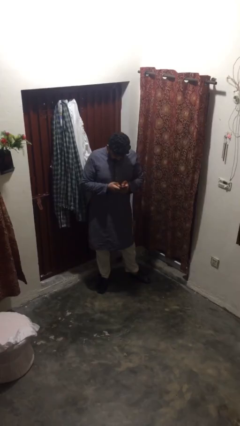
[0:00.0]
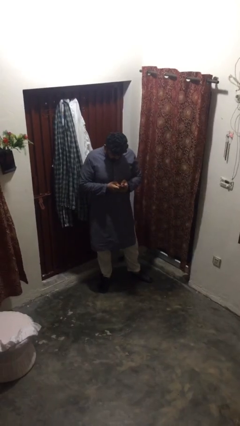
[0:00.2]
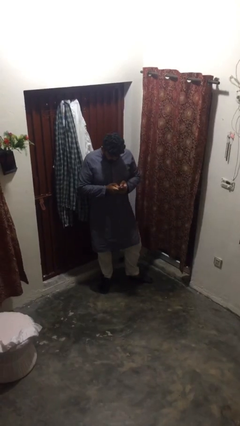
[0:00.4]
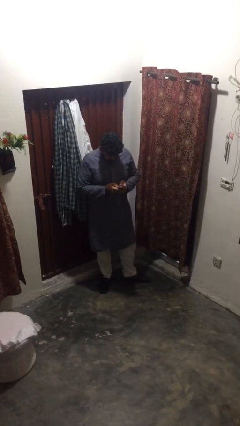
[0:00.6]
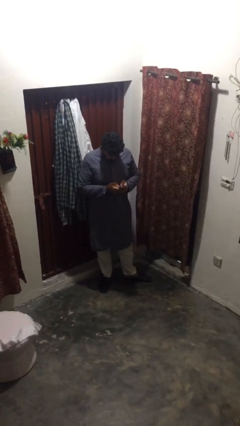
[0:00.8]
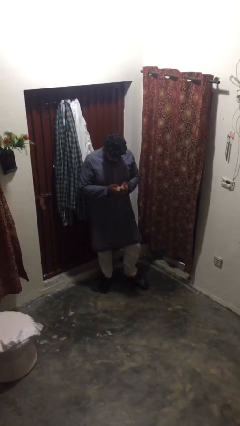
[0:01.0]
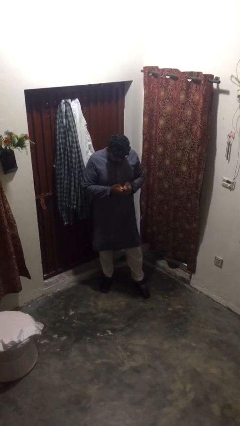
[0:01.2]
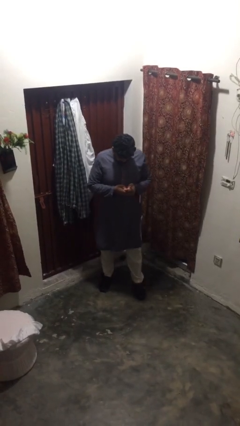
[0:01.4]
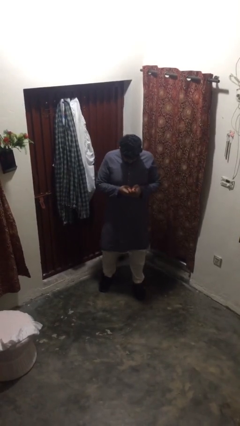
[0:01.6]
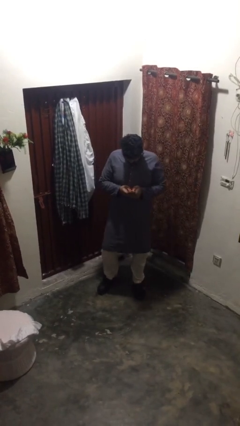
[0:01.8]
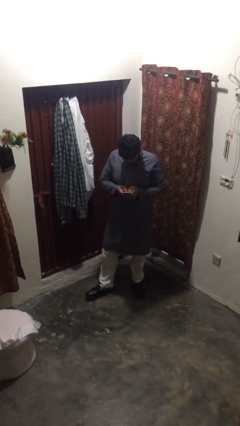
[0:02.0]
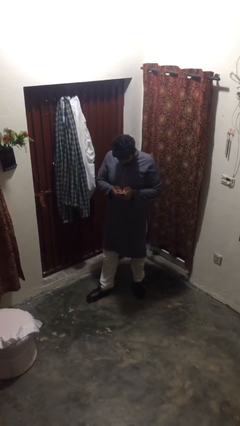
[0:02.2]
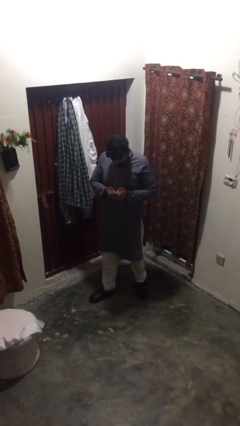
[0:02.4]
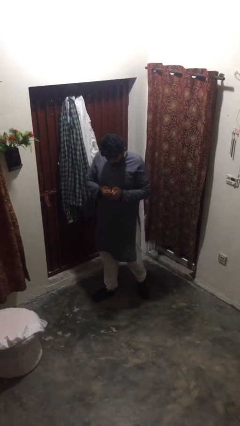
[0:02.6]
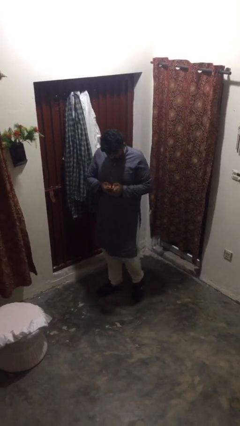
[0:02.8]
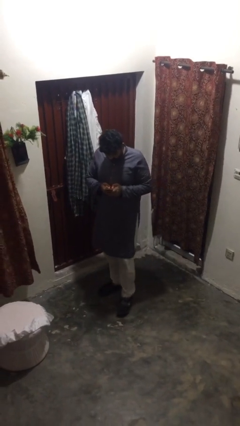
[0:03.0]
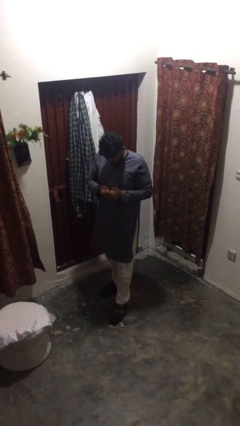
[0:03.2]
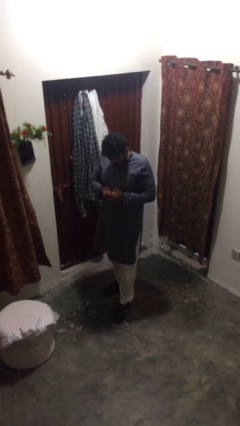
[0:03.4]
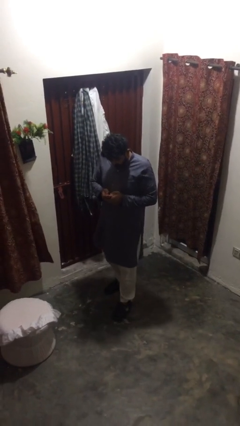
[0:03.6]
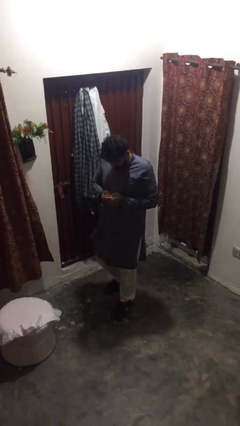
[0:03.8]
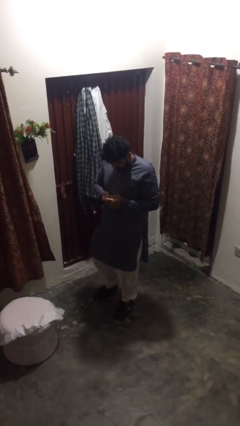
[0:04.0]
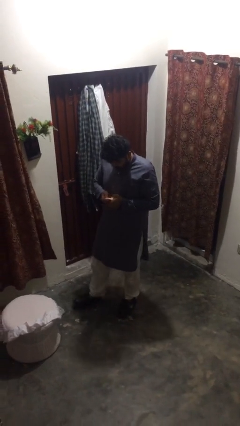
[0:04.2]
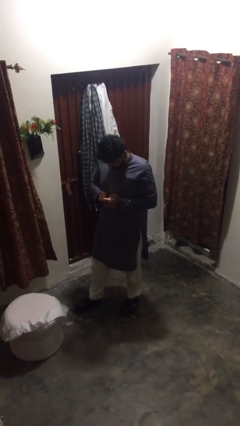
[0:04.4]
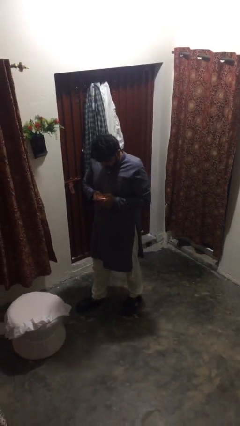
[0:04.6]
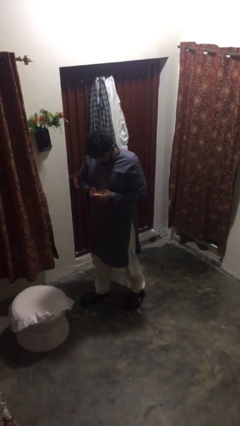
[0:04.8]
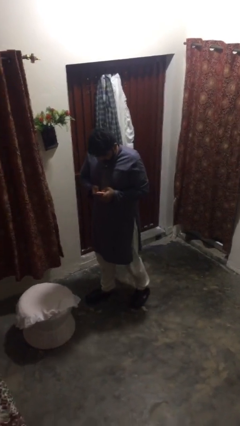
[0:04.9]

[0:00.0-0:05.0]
person texts on phone

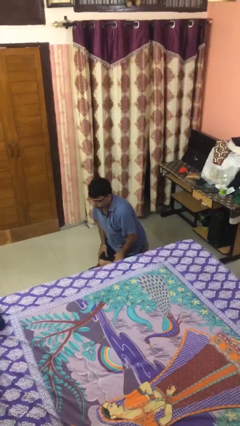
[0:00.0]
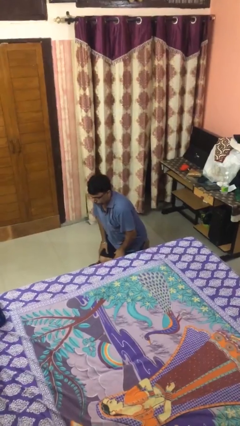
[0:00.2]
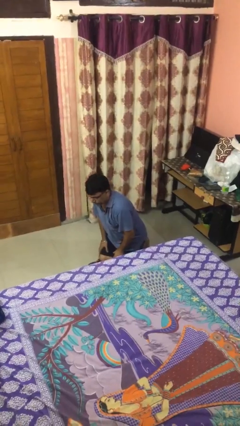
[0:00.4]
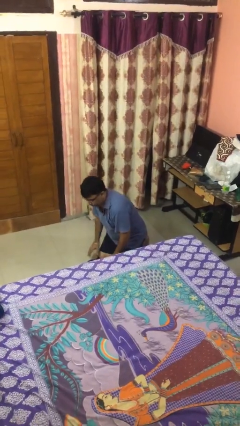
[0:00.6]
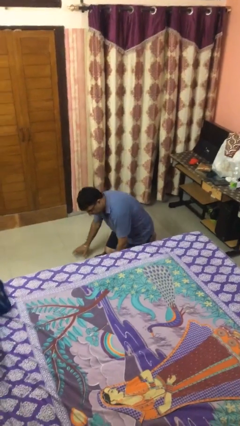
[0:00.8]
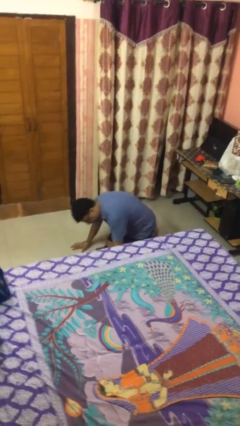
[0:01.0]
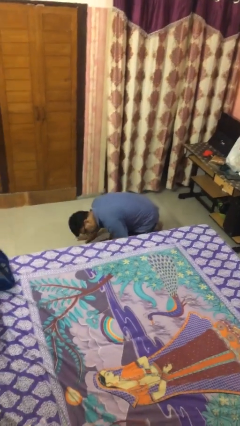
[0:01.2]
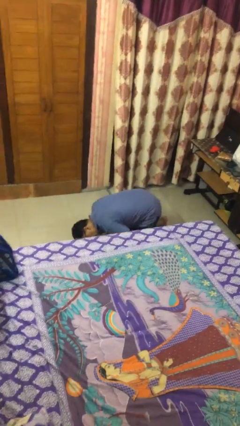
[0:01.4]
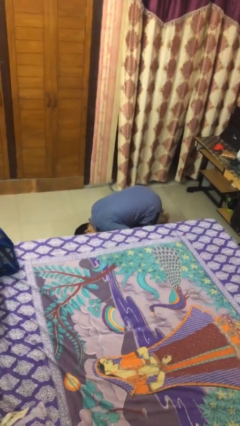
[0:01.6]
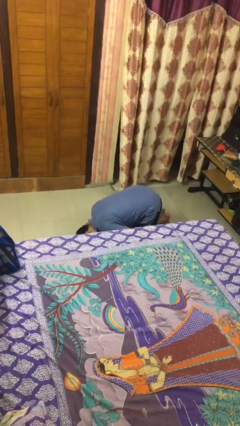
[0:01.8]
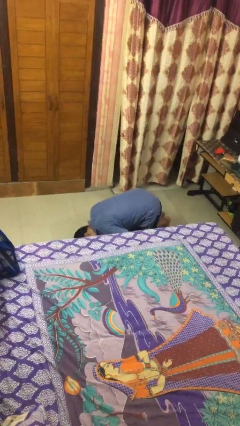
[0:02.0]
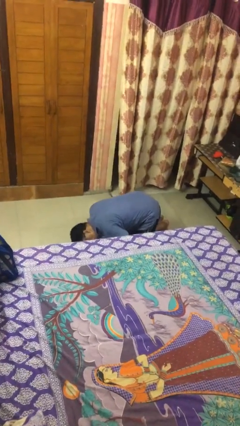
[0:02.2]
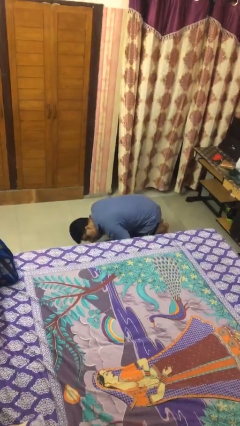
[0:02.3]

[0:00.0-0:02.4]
person searches under bed

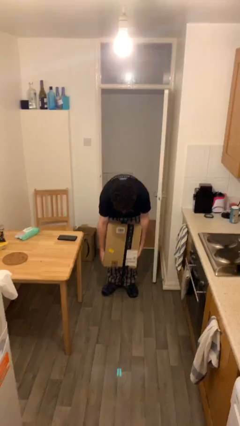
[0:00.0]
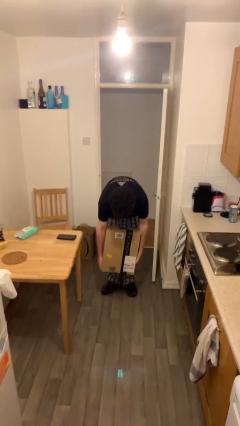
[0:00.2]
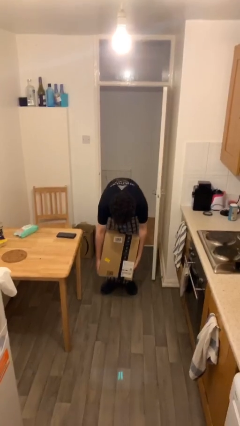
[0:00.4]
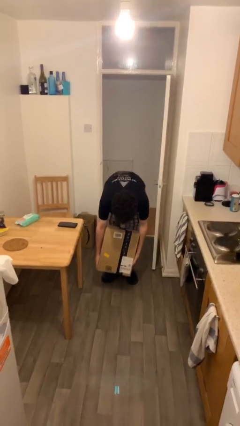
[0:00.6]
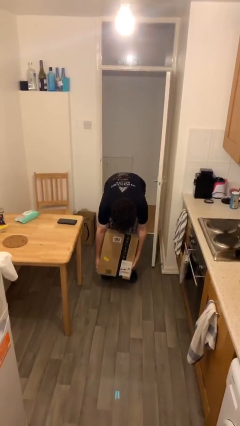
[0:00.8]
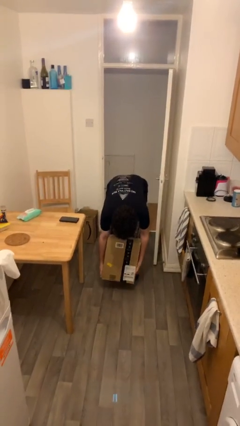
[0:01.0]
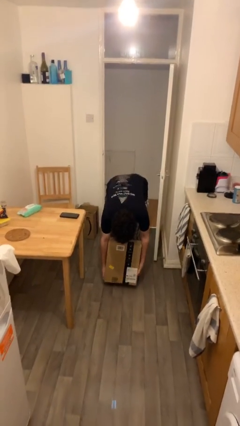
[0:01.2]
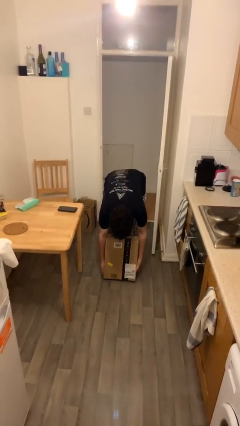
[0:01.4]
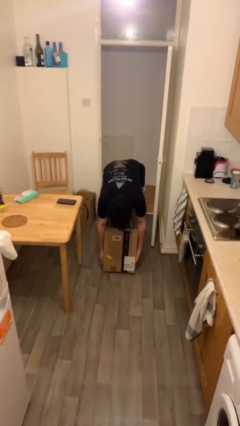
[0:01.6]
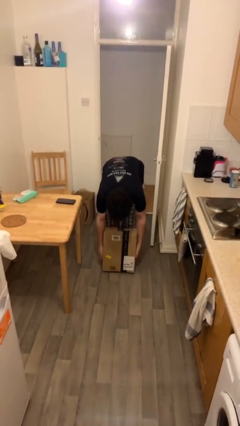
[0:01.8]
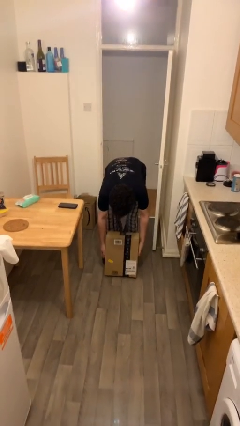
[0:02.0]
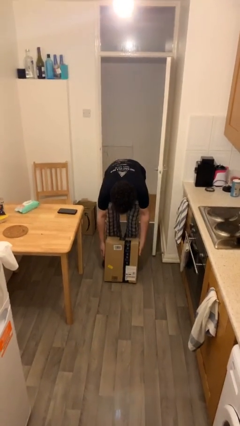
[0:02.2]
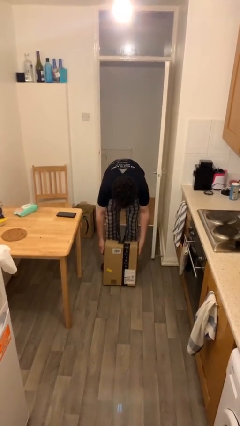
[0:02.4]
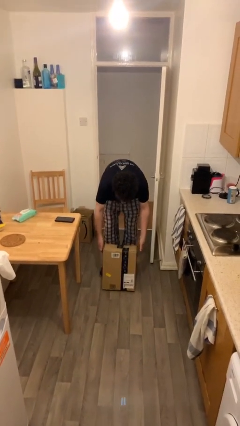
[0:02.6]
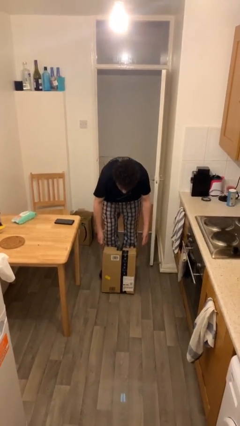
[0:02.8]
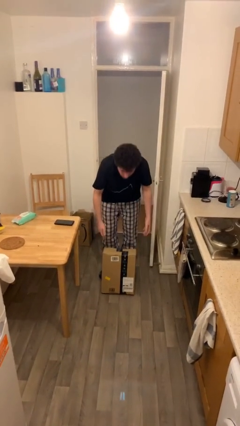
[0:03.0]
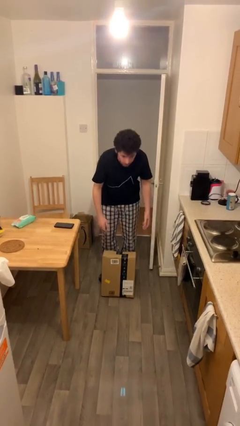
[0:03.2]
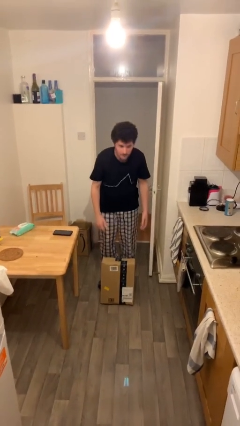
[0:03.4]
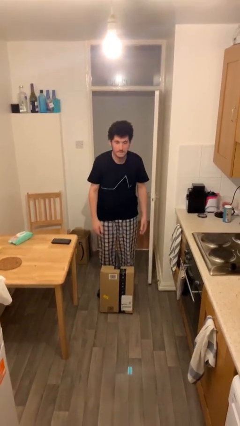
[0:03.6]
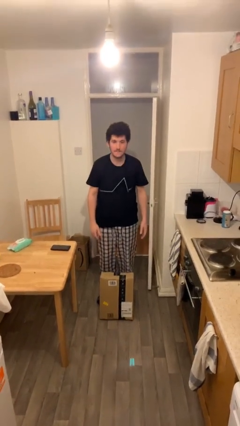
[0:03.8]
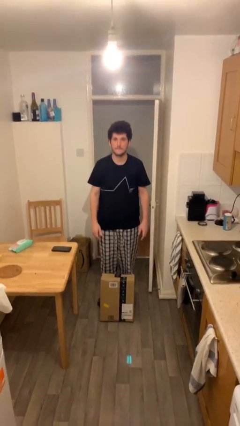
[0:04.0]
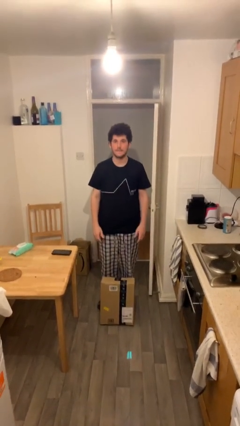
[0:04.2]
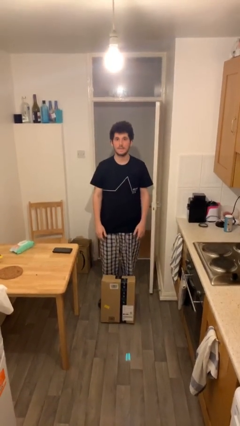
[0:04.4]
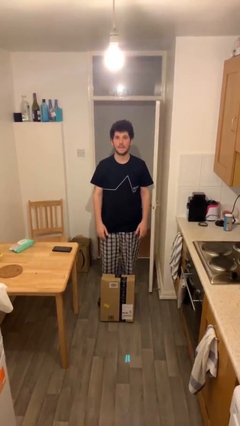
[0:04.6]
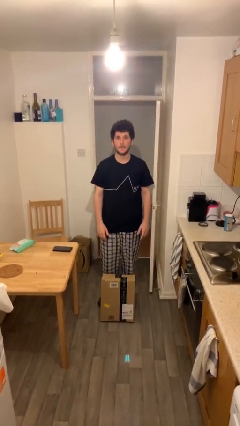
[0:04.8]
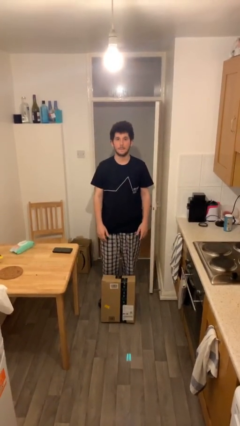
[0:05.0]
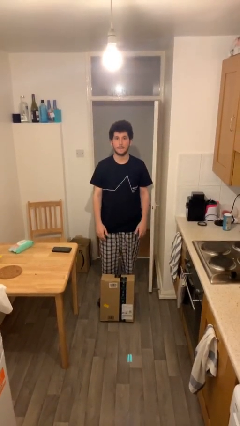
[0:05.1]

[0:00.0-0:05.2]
person puts down object on floor

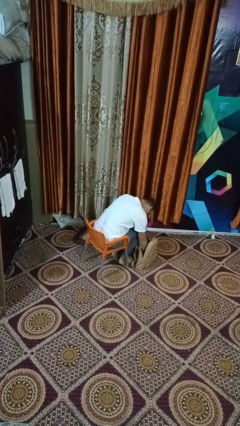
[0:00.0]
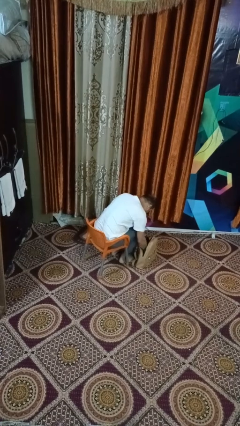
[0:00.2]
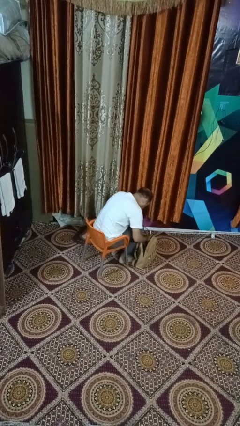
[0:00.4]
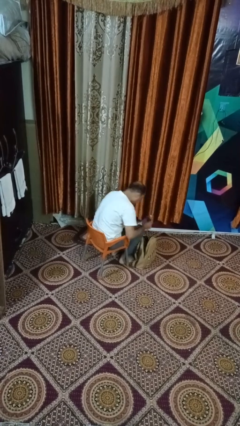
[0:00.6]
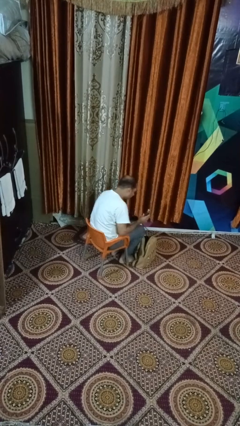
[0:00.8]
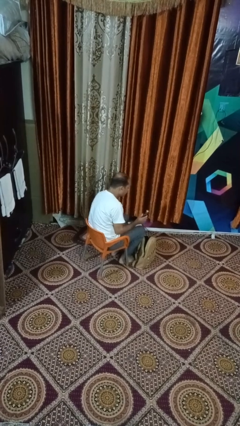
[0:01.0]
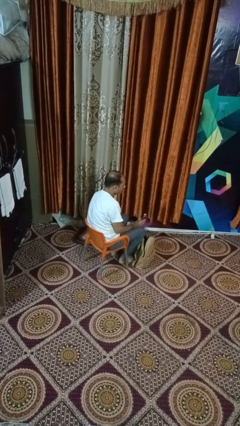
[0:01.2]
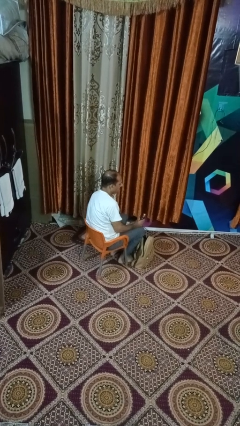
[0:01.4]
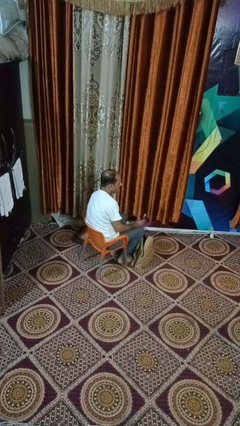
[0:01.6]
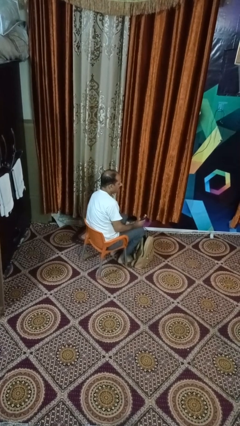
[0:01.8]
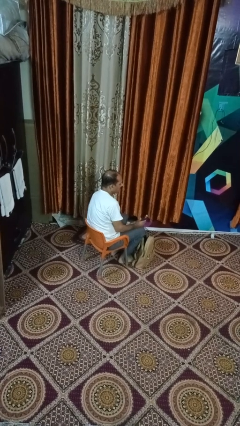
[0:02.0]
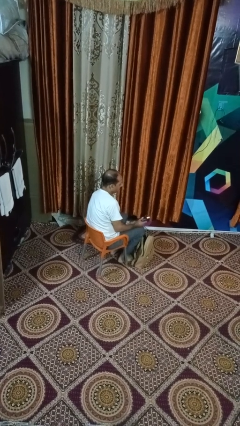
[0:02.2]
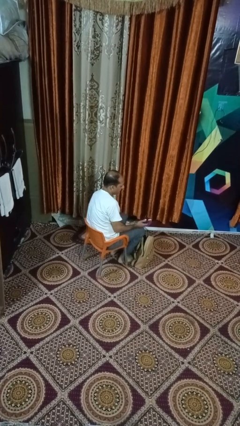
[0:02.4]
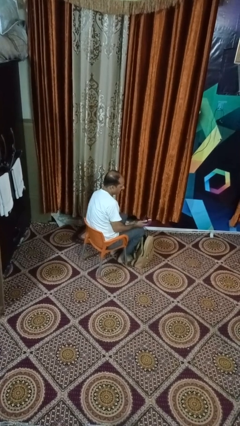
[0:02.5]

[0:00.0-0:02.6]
person takes object from purse

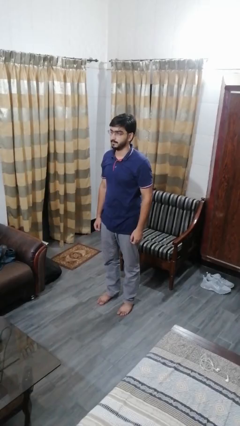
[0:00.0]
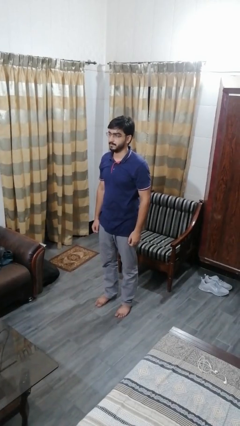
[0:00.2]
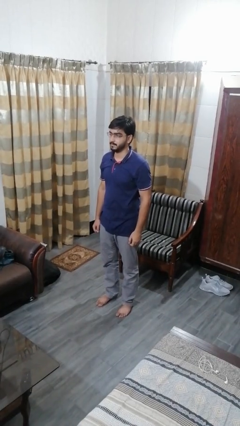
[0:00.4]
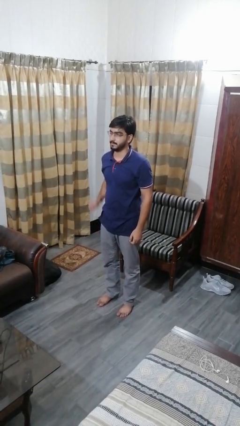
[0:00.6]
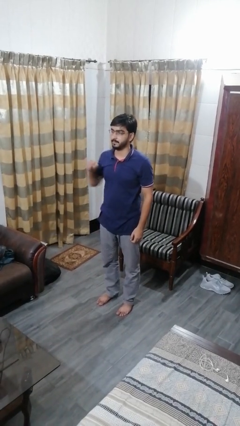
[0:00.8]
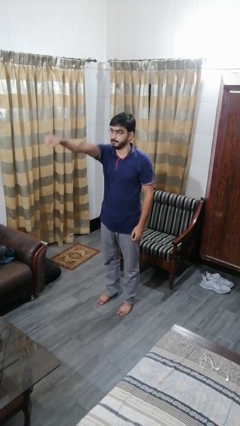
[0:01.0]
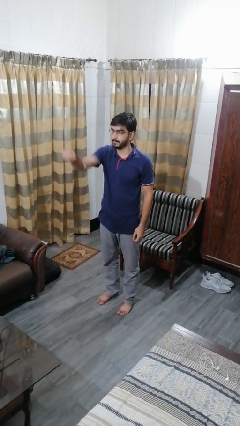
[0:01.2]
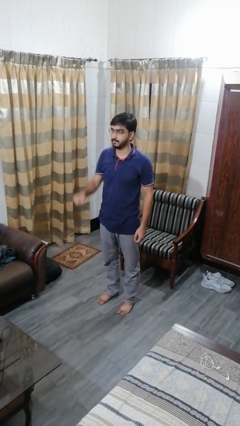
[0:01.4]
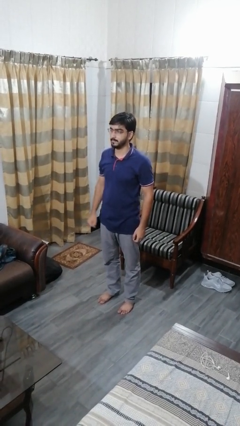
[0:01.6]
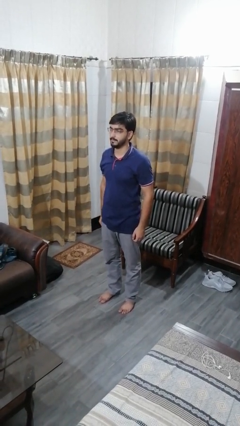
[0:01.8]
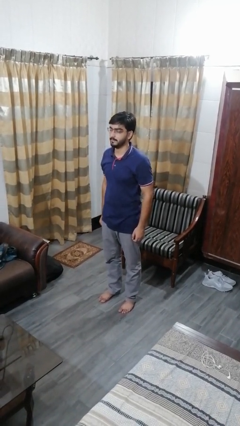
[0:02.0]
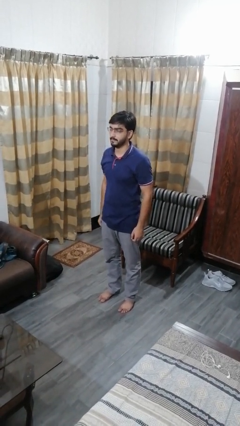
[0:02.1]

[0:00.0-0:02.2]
person punches
